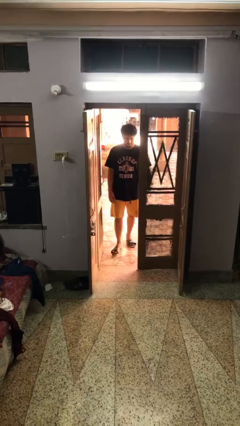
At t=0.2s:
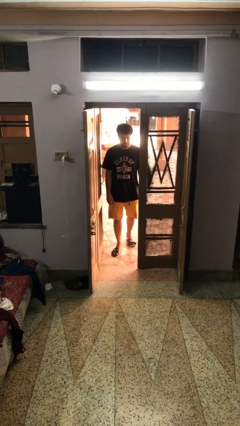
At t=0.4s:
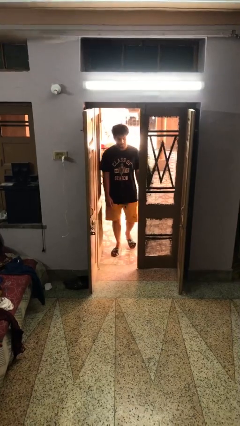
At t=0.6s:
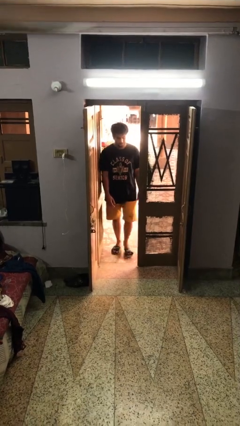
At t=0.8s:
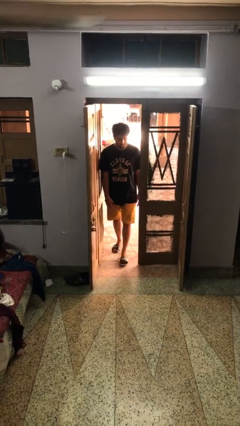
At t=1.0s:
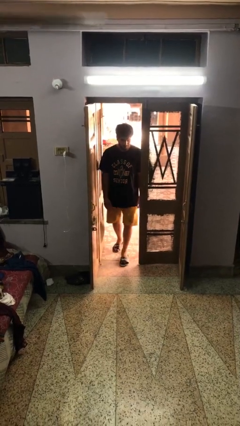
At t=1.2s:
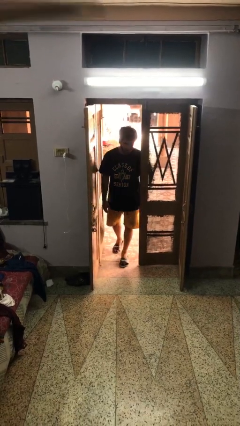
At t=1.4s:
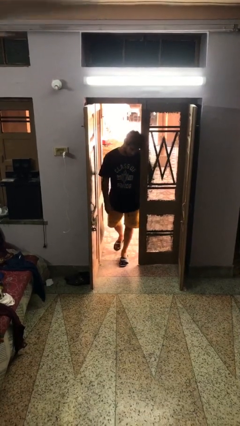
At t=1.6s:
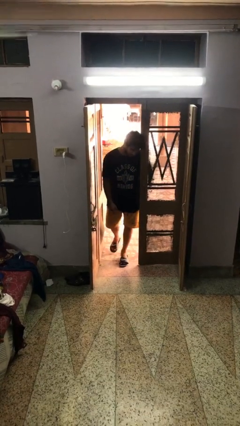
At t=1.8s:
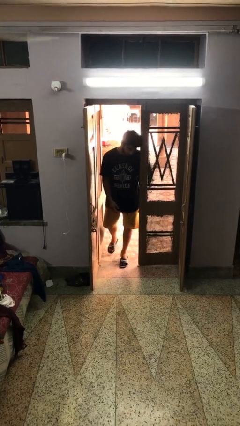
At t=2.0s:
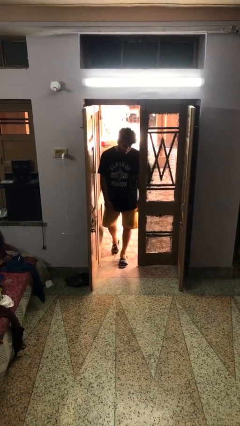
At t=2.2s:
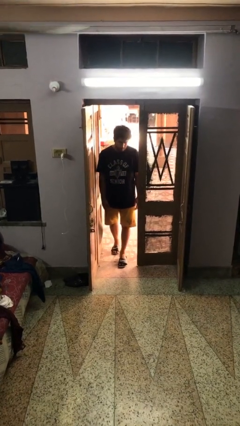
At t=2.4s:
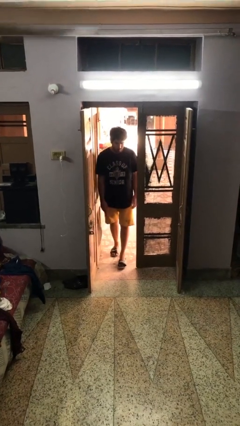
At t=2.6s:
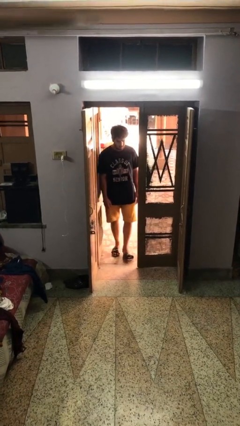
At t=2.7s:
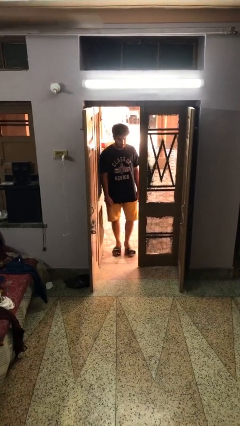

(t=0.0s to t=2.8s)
person bumps into wall

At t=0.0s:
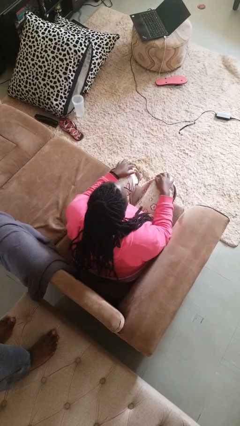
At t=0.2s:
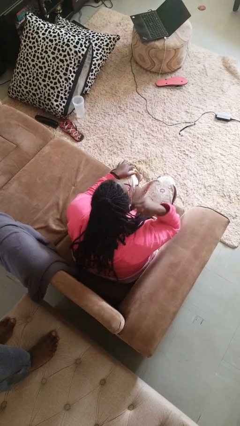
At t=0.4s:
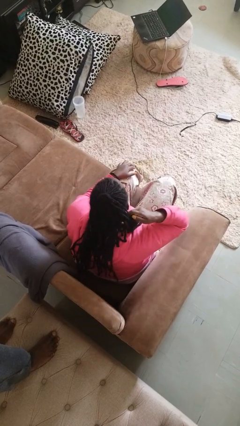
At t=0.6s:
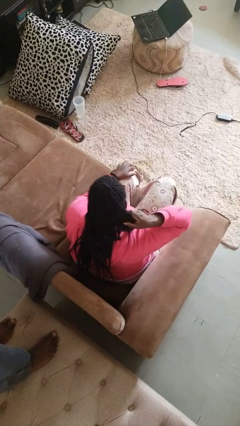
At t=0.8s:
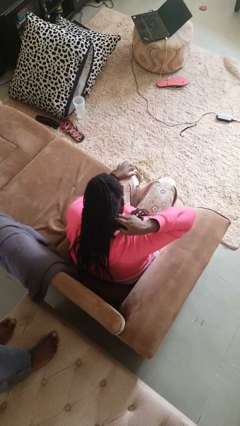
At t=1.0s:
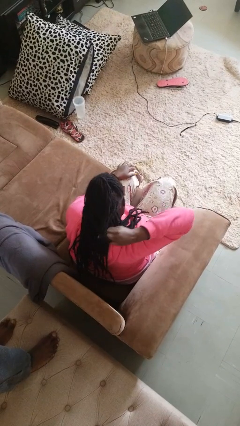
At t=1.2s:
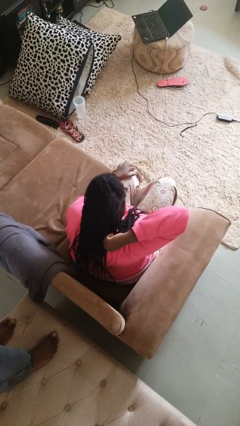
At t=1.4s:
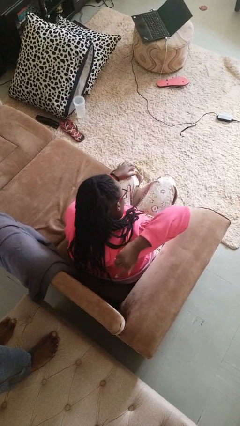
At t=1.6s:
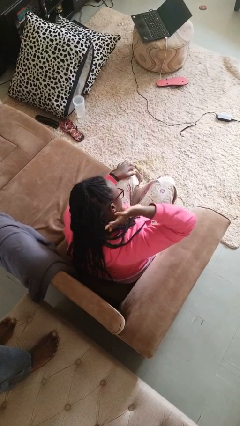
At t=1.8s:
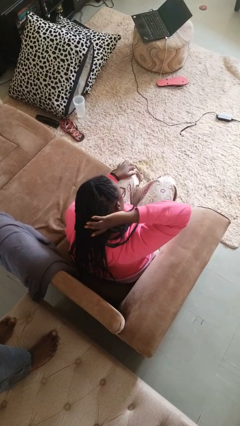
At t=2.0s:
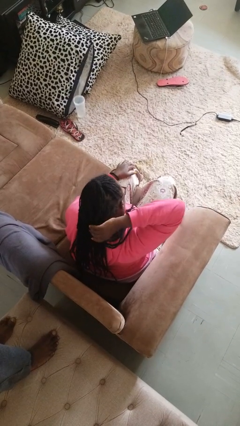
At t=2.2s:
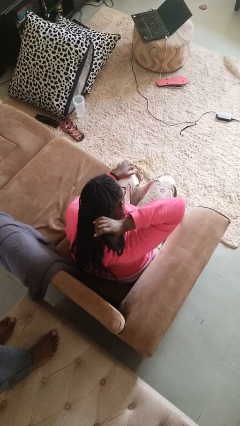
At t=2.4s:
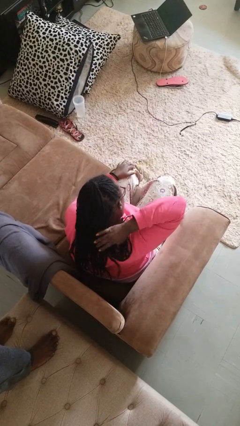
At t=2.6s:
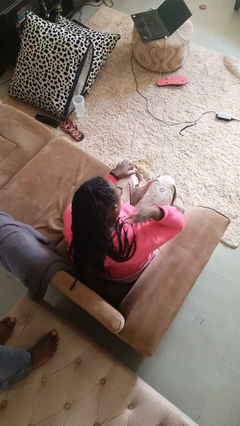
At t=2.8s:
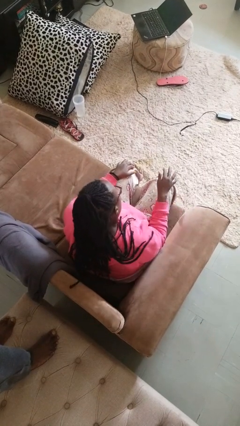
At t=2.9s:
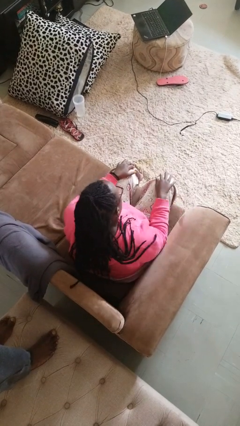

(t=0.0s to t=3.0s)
person strokes hair

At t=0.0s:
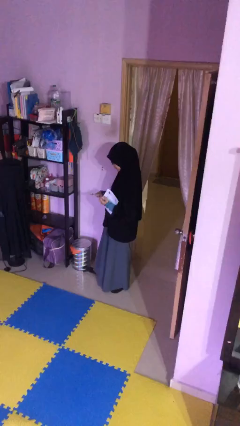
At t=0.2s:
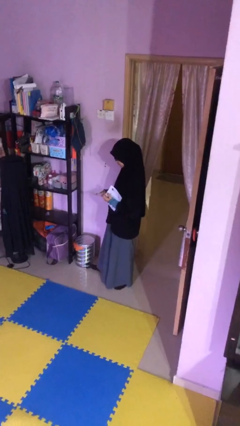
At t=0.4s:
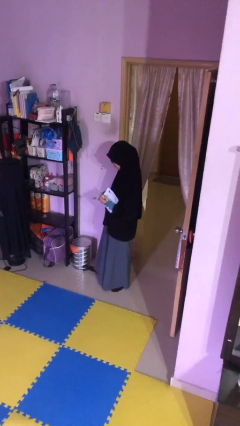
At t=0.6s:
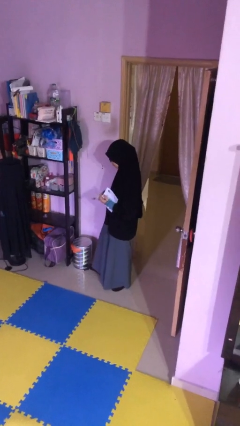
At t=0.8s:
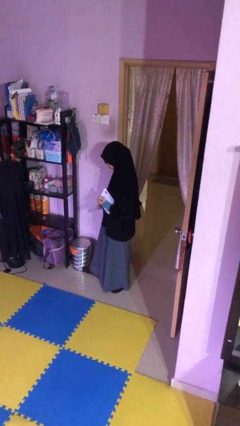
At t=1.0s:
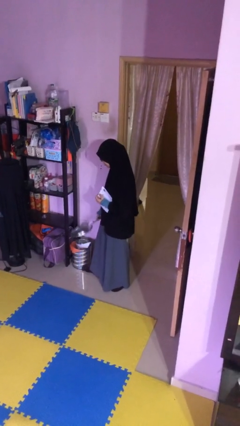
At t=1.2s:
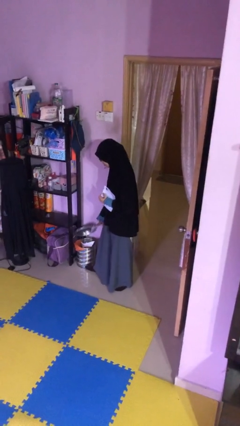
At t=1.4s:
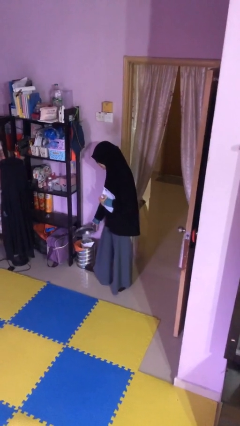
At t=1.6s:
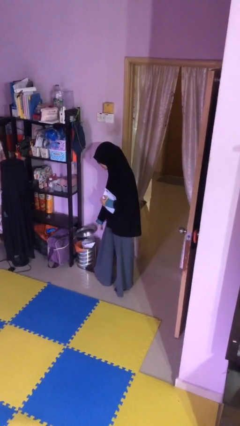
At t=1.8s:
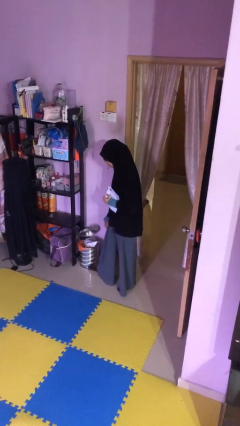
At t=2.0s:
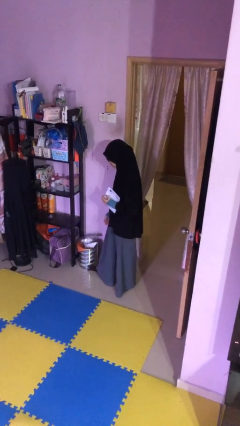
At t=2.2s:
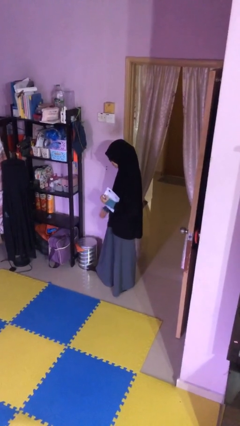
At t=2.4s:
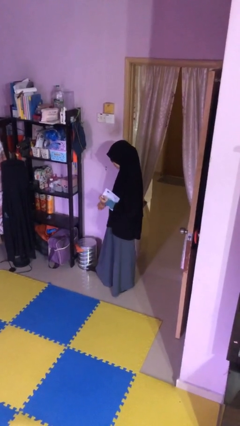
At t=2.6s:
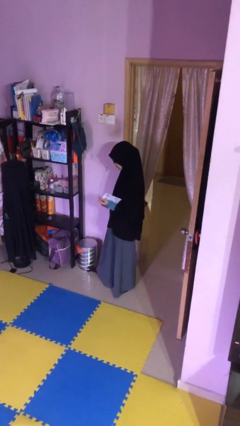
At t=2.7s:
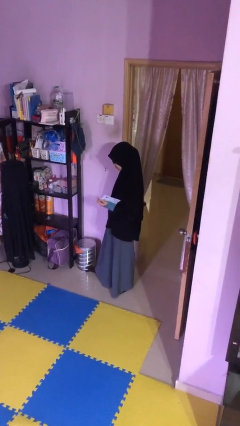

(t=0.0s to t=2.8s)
person discards trash

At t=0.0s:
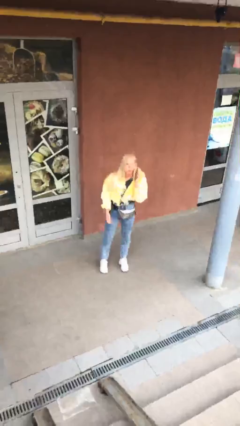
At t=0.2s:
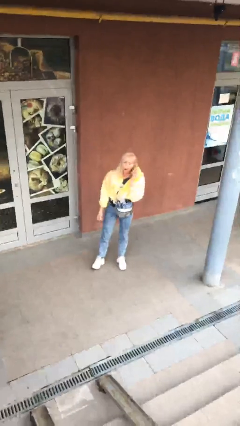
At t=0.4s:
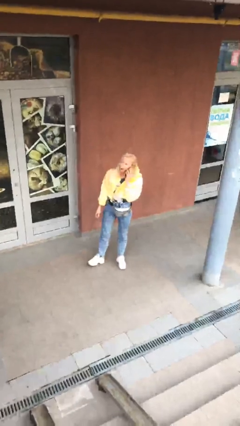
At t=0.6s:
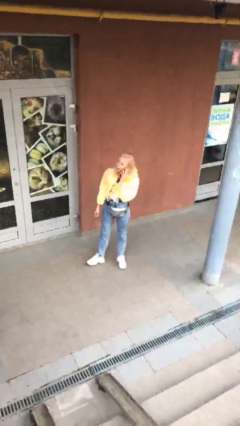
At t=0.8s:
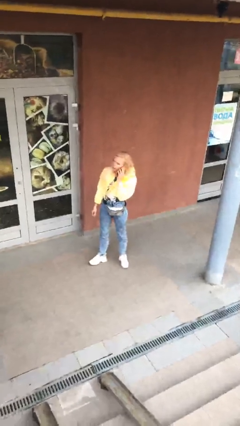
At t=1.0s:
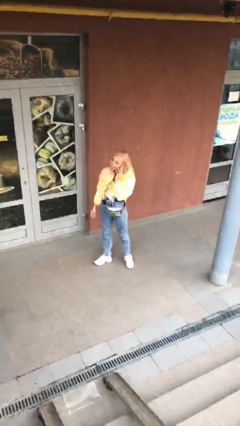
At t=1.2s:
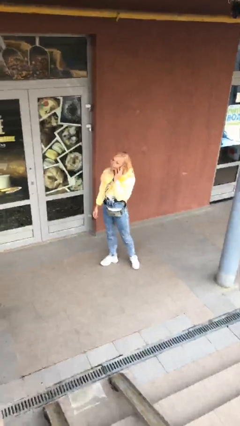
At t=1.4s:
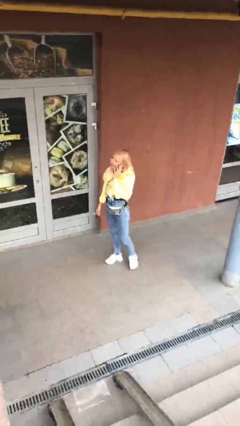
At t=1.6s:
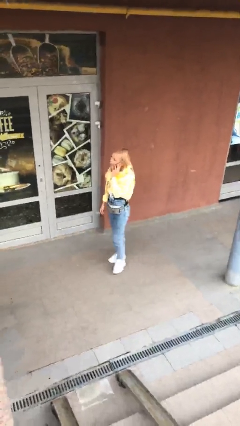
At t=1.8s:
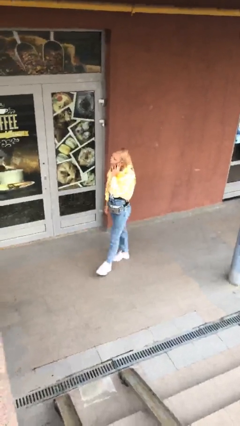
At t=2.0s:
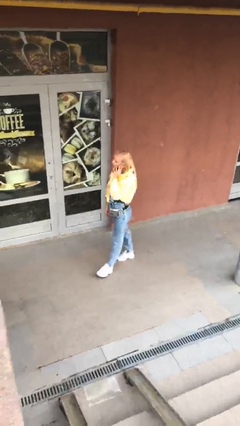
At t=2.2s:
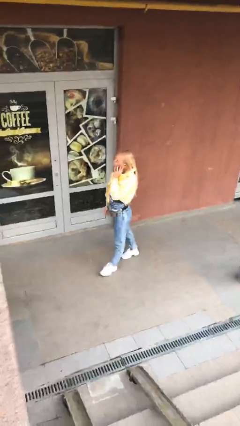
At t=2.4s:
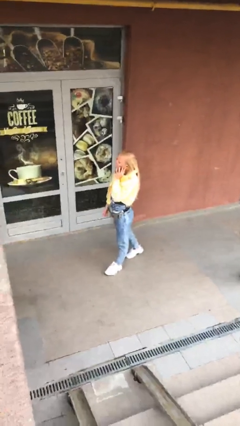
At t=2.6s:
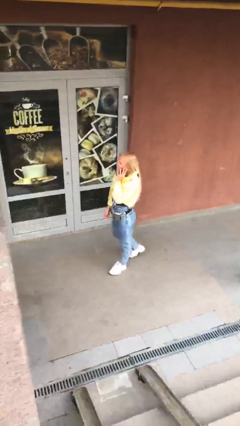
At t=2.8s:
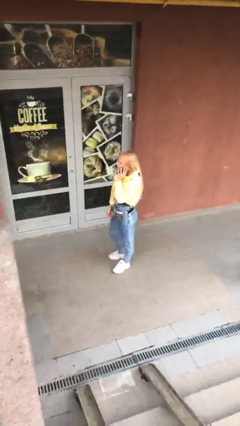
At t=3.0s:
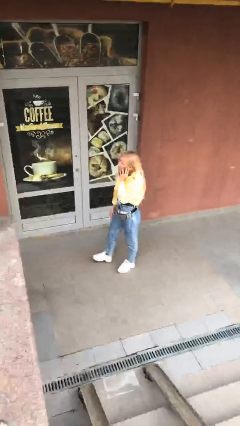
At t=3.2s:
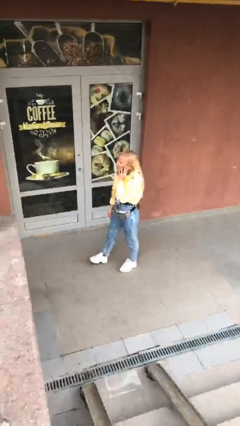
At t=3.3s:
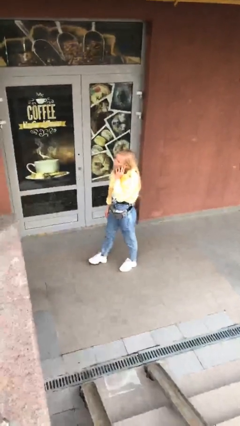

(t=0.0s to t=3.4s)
person talks on phone

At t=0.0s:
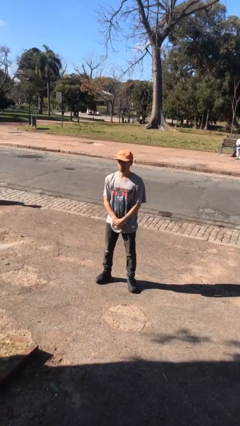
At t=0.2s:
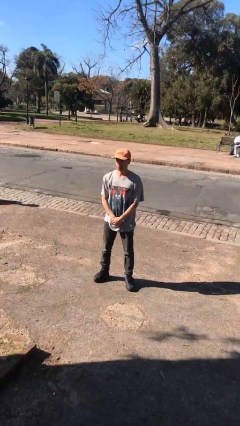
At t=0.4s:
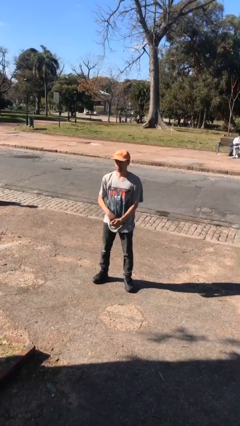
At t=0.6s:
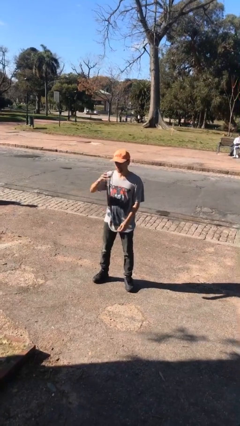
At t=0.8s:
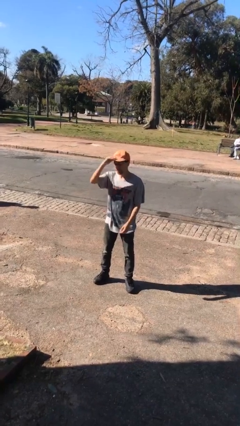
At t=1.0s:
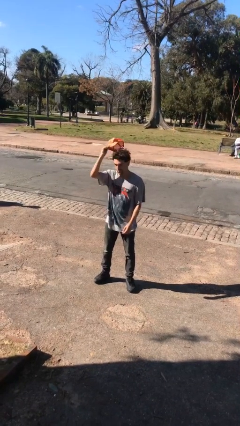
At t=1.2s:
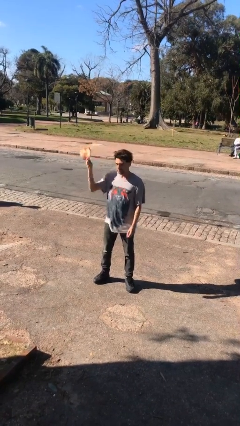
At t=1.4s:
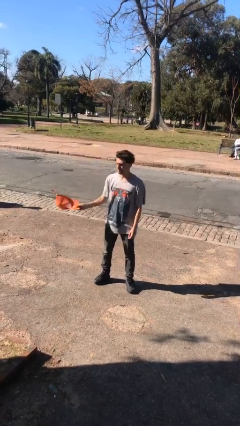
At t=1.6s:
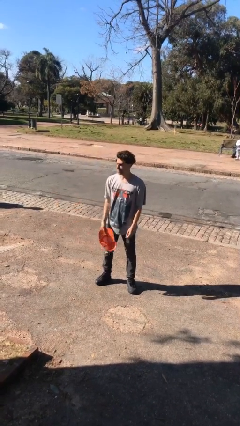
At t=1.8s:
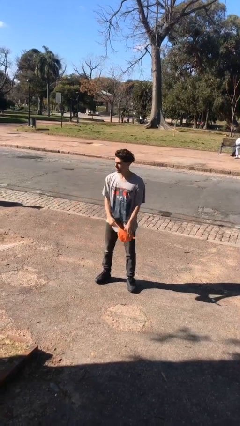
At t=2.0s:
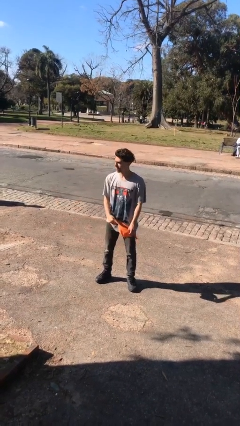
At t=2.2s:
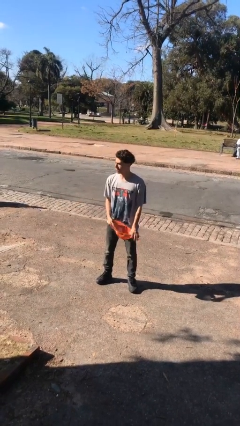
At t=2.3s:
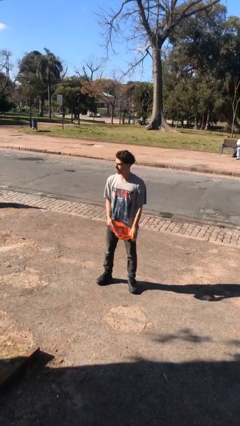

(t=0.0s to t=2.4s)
person takes off hat

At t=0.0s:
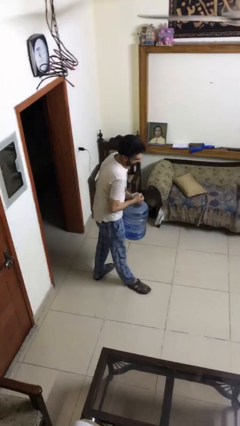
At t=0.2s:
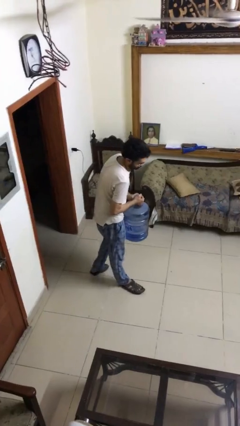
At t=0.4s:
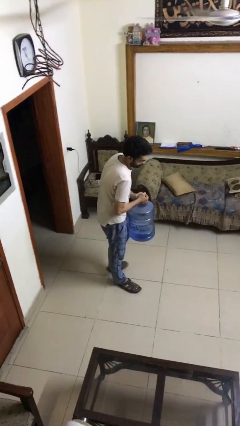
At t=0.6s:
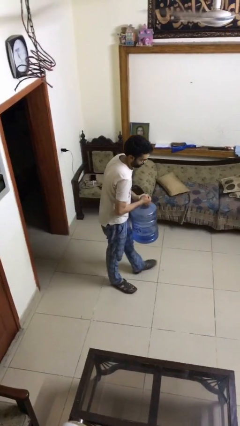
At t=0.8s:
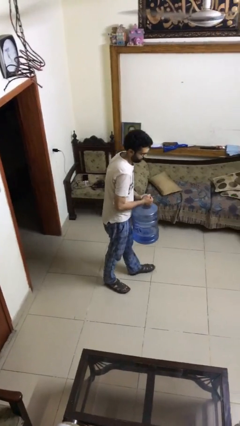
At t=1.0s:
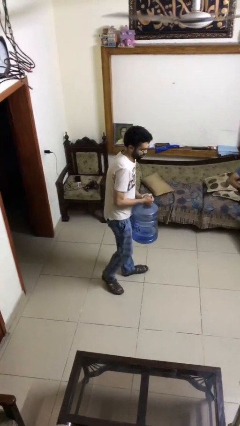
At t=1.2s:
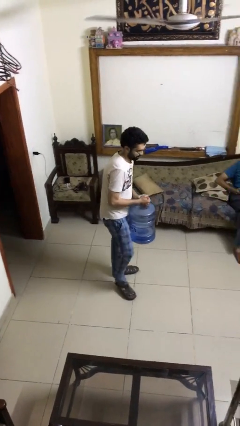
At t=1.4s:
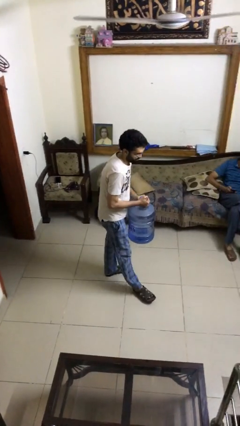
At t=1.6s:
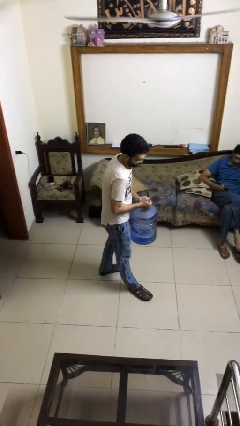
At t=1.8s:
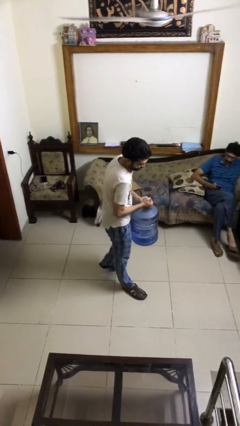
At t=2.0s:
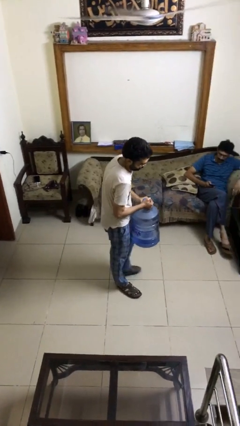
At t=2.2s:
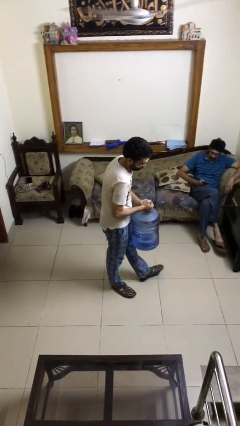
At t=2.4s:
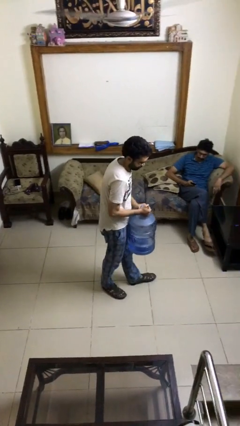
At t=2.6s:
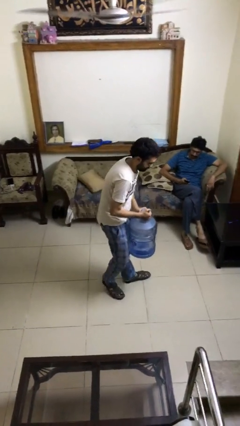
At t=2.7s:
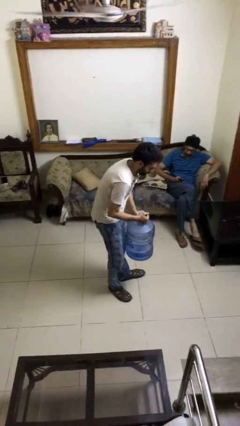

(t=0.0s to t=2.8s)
person carries heavy object
